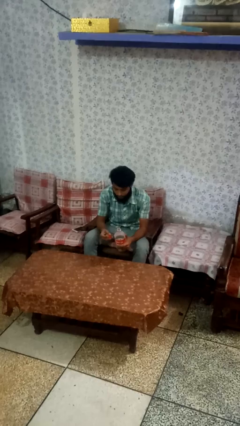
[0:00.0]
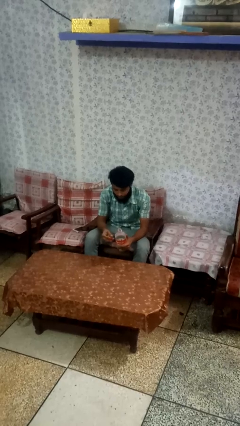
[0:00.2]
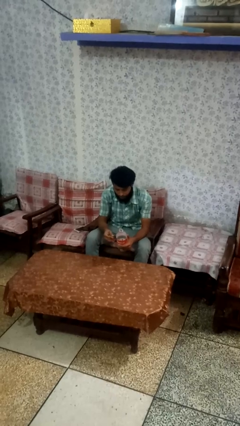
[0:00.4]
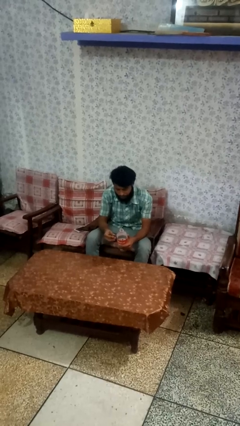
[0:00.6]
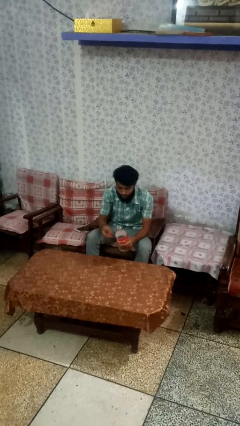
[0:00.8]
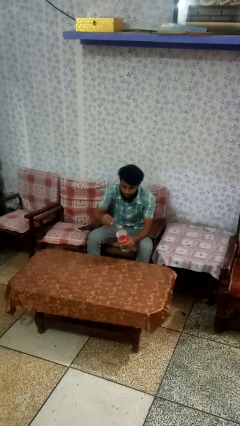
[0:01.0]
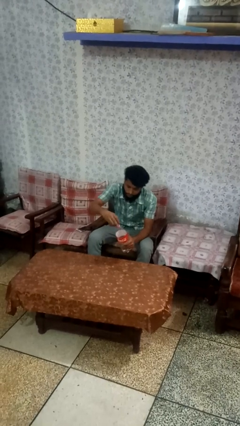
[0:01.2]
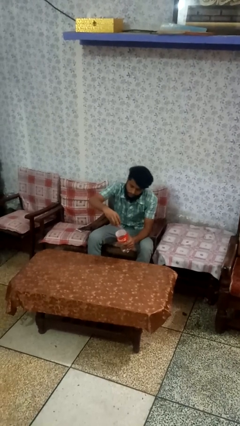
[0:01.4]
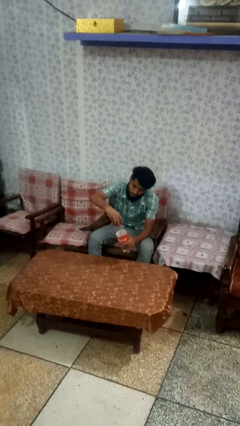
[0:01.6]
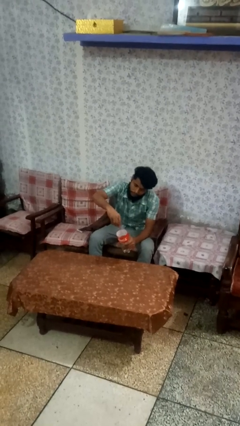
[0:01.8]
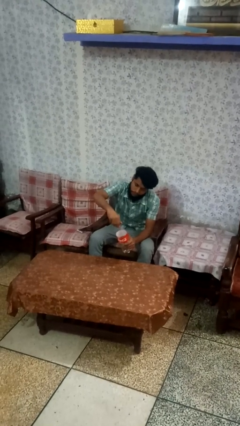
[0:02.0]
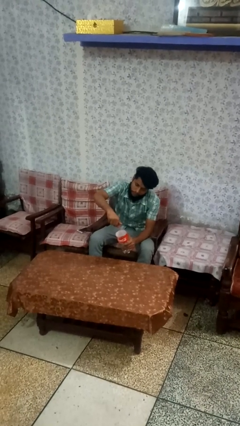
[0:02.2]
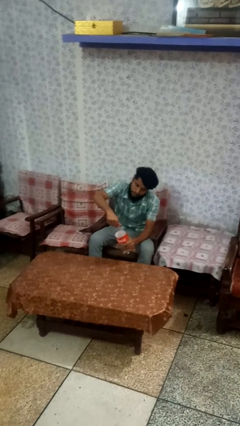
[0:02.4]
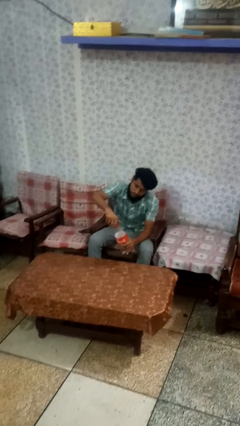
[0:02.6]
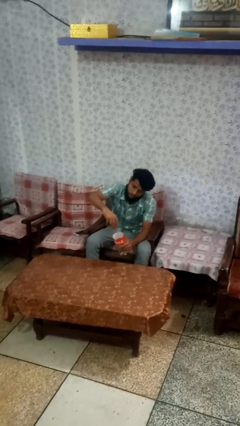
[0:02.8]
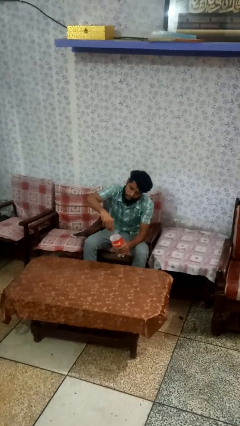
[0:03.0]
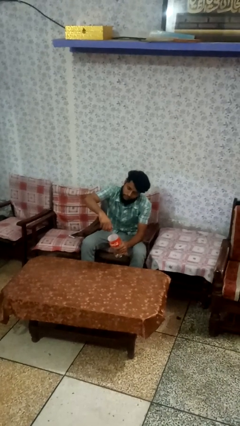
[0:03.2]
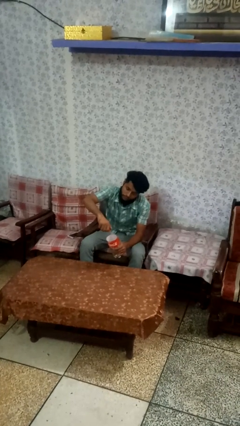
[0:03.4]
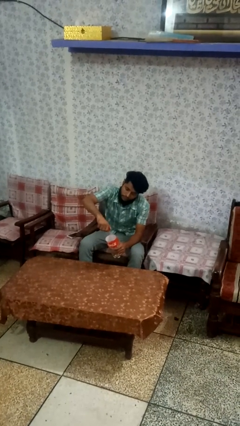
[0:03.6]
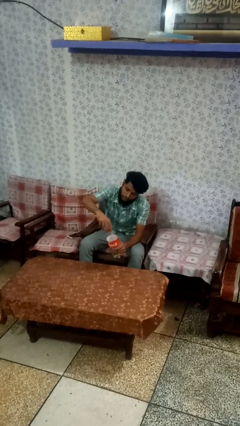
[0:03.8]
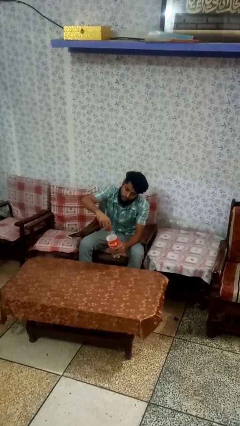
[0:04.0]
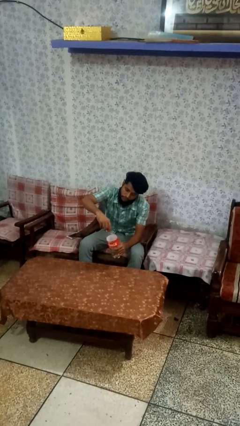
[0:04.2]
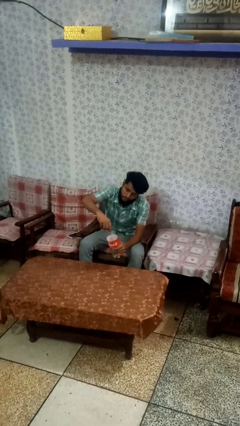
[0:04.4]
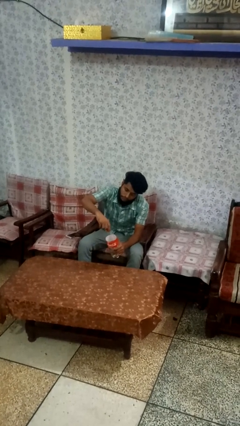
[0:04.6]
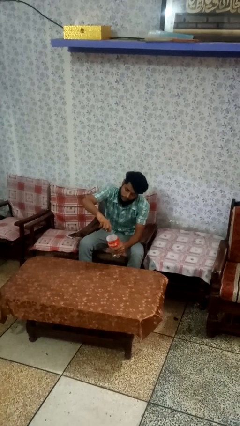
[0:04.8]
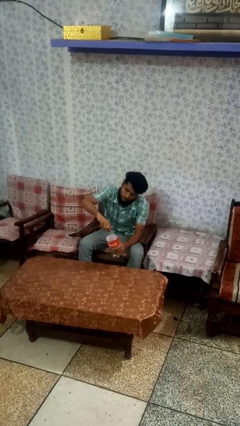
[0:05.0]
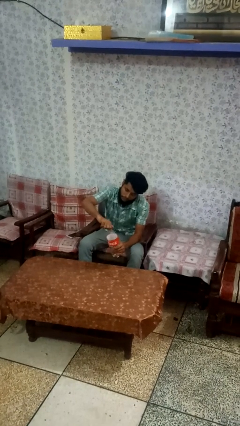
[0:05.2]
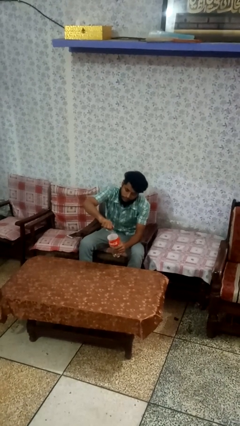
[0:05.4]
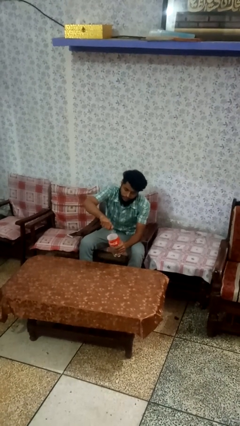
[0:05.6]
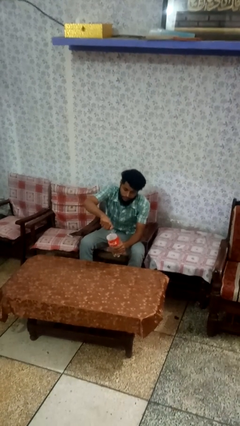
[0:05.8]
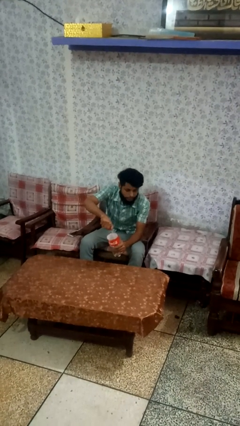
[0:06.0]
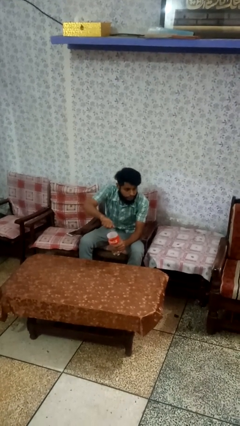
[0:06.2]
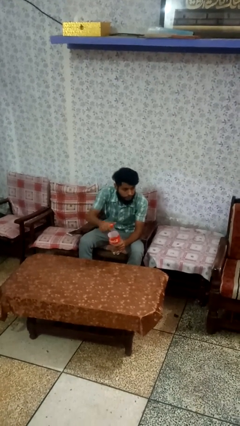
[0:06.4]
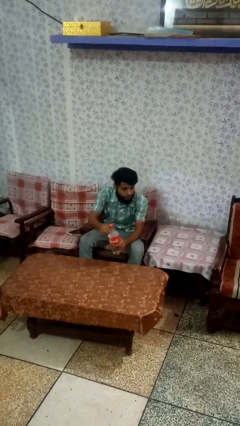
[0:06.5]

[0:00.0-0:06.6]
person screws lid to bottle

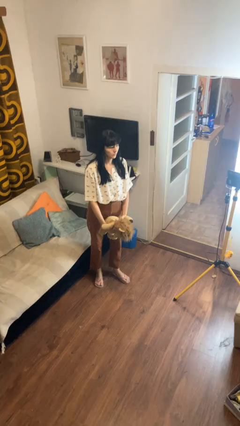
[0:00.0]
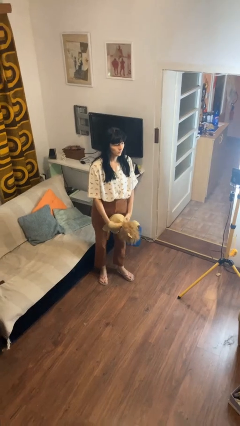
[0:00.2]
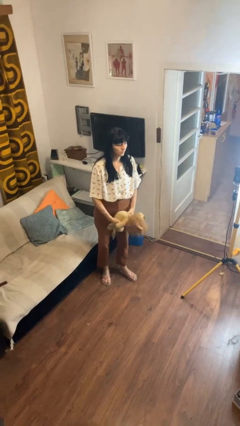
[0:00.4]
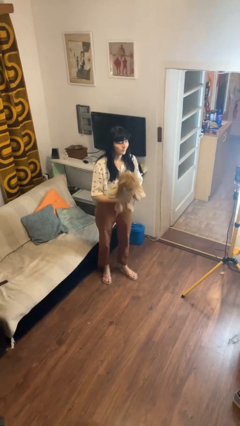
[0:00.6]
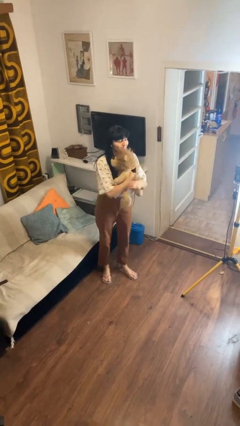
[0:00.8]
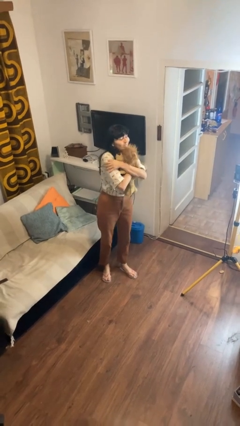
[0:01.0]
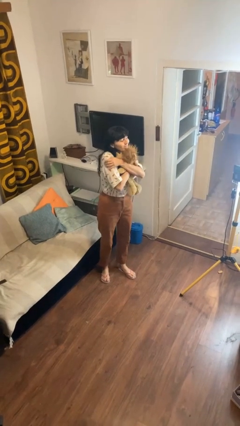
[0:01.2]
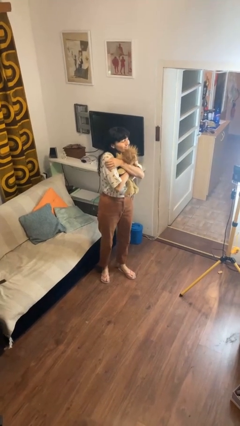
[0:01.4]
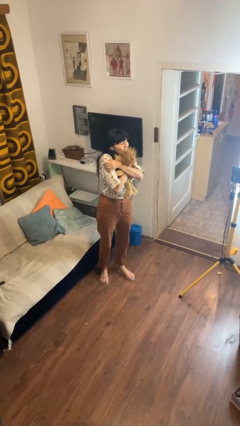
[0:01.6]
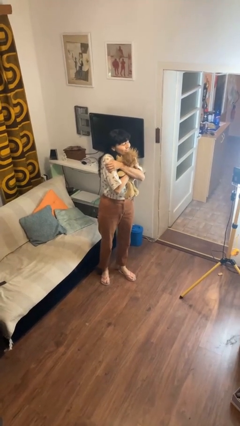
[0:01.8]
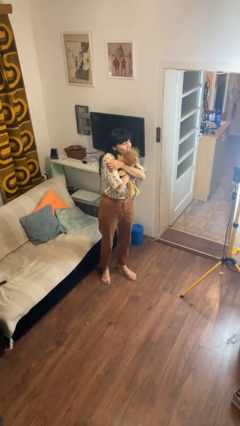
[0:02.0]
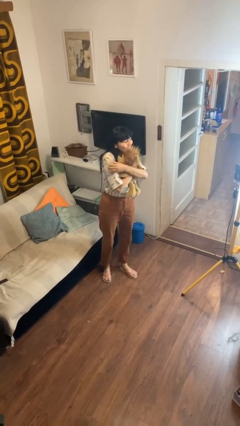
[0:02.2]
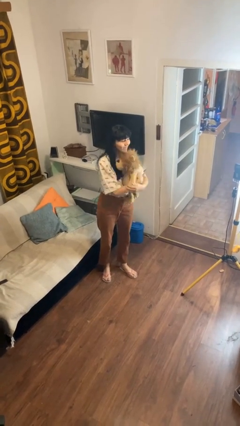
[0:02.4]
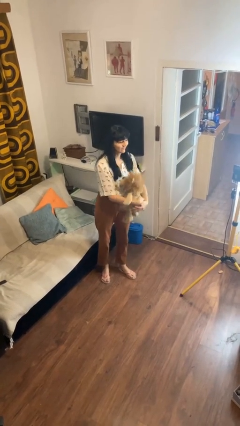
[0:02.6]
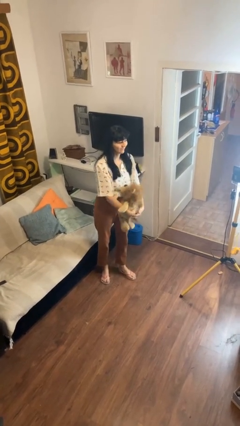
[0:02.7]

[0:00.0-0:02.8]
person hugs stuffed animal

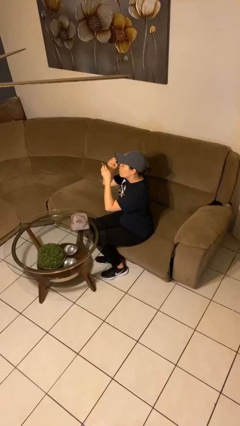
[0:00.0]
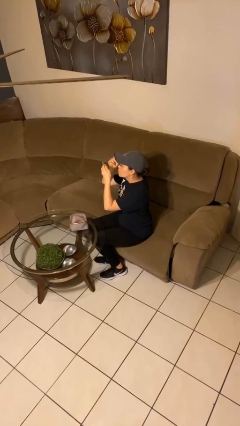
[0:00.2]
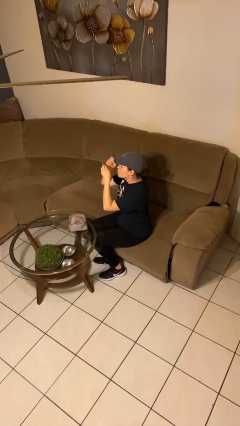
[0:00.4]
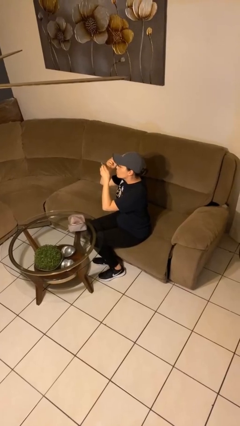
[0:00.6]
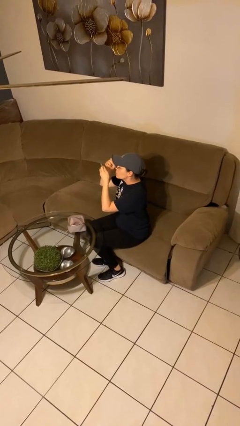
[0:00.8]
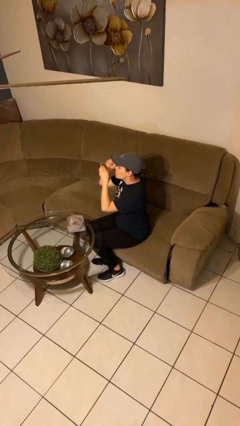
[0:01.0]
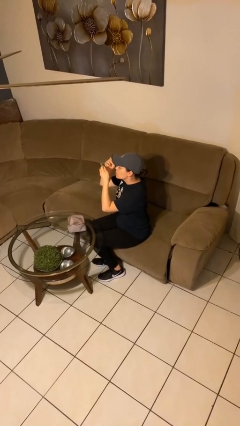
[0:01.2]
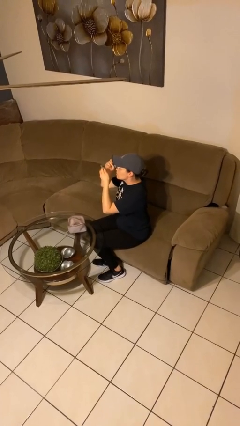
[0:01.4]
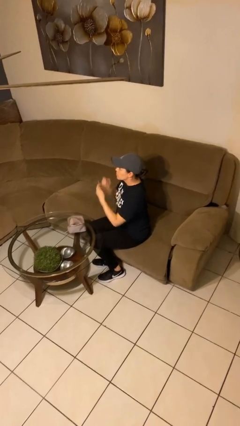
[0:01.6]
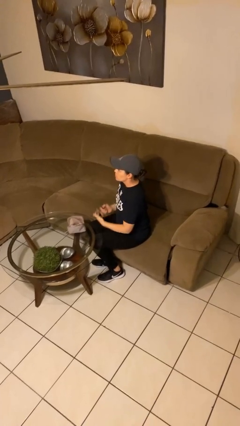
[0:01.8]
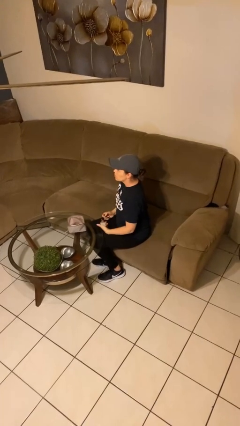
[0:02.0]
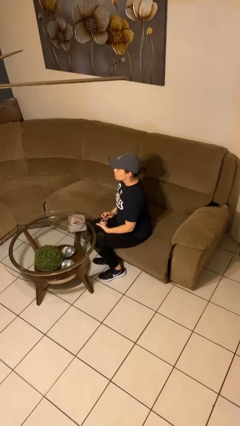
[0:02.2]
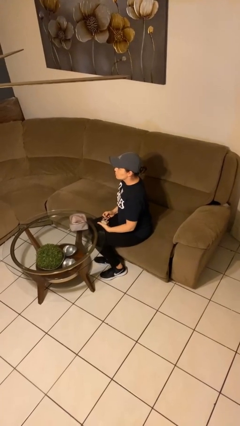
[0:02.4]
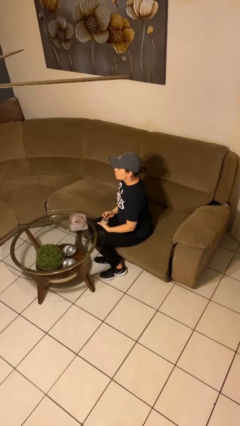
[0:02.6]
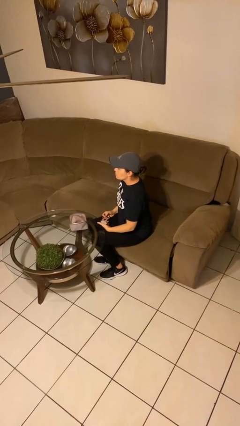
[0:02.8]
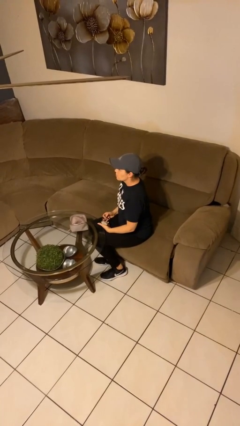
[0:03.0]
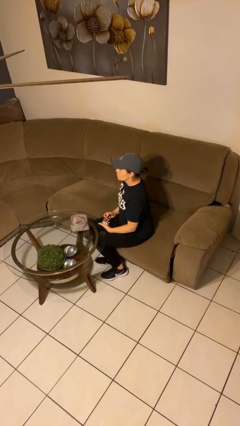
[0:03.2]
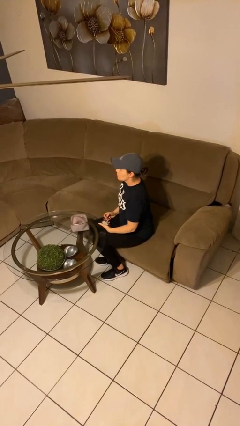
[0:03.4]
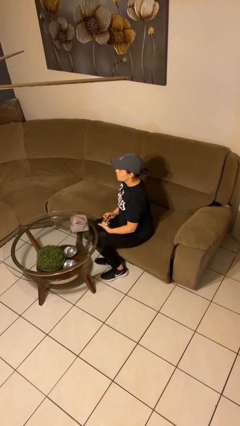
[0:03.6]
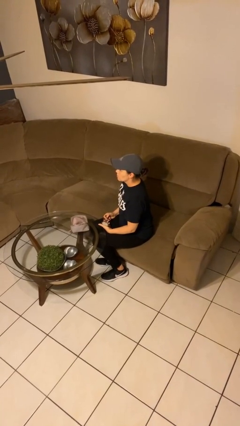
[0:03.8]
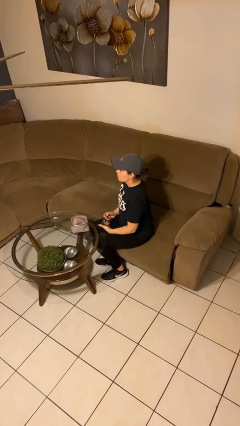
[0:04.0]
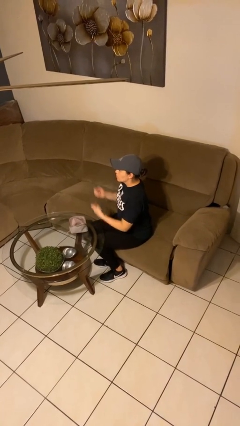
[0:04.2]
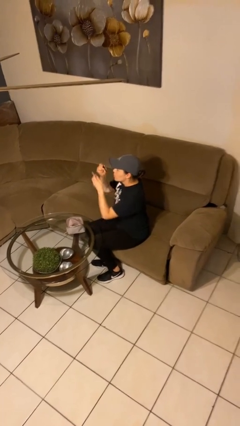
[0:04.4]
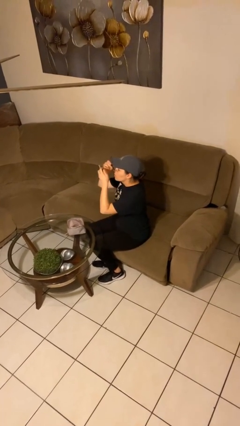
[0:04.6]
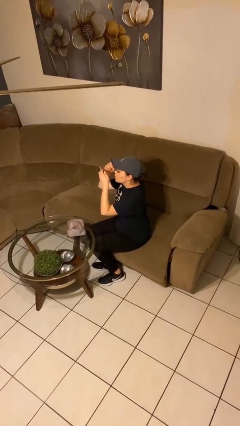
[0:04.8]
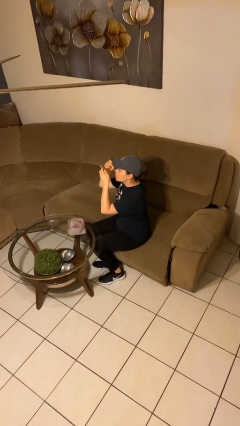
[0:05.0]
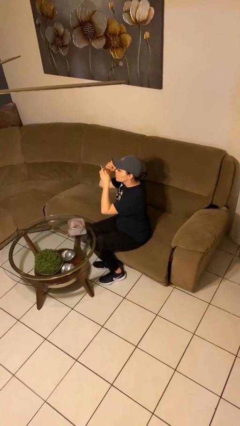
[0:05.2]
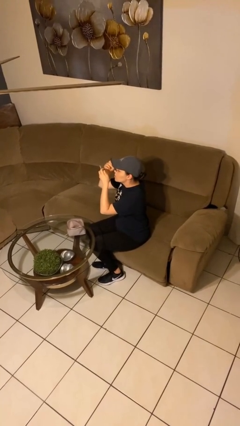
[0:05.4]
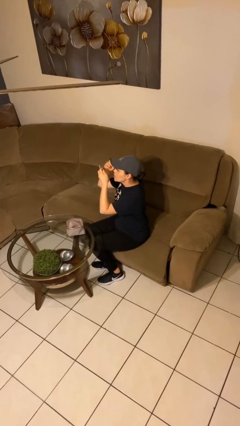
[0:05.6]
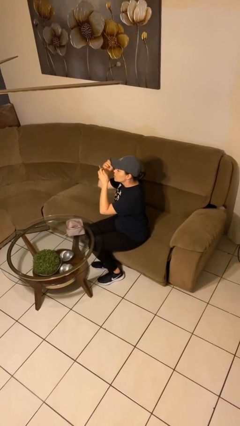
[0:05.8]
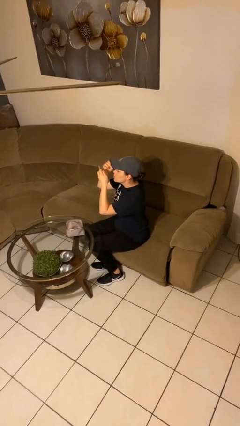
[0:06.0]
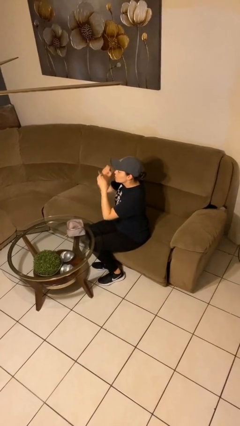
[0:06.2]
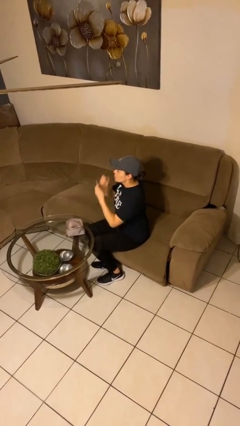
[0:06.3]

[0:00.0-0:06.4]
person applies eye makeup

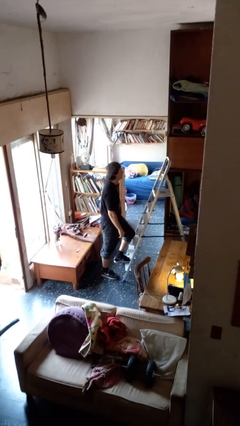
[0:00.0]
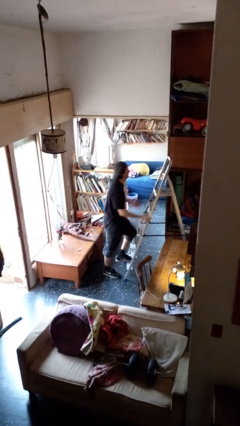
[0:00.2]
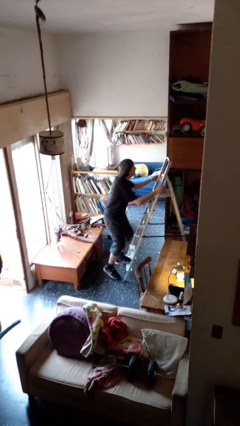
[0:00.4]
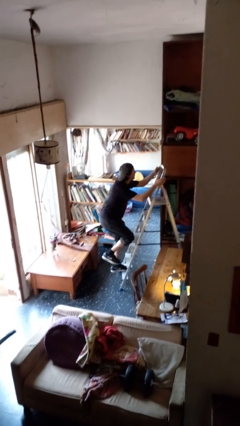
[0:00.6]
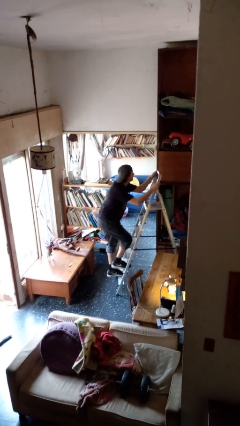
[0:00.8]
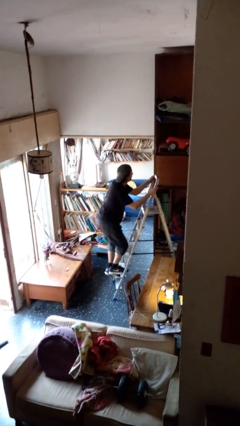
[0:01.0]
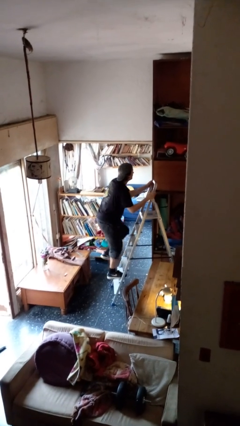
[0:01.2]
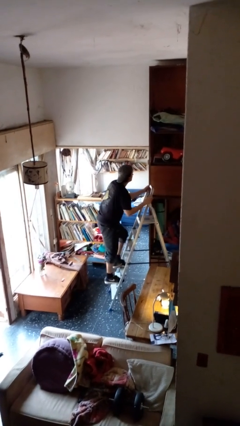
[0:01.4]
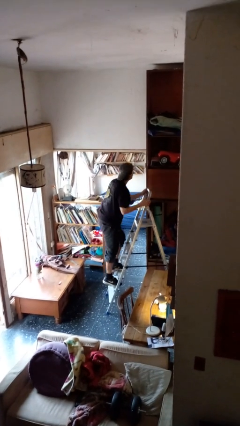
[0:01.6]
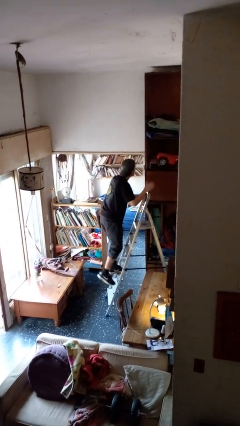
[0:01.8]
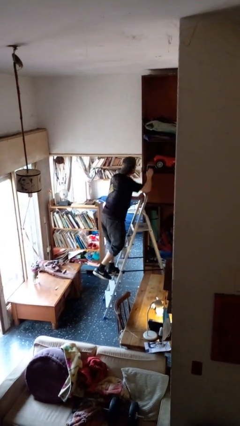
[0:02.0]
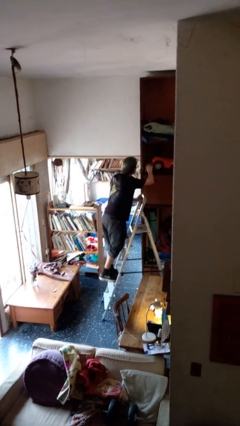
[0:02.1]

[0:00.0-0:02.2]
person climbs up ladder
